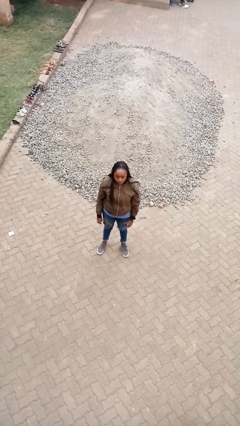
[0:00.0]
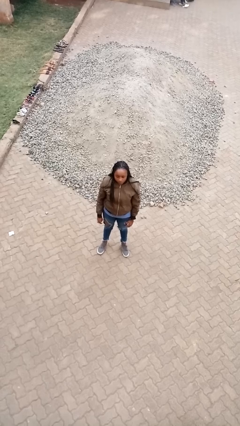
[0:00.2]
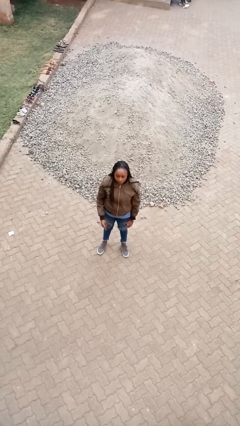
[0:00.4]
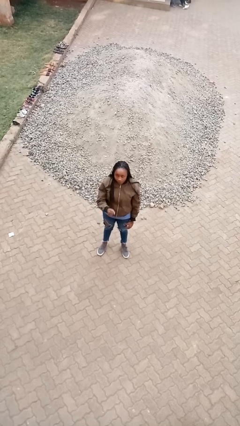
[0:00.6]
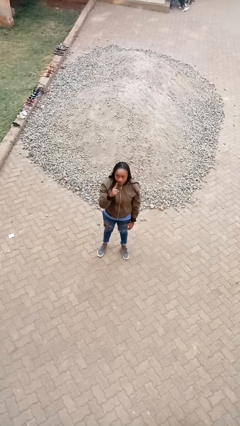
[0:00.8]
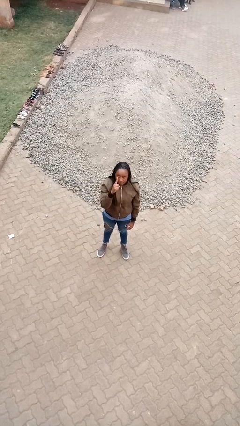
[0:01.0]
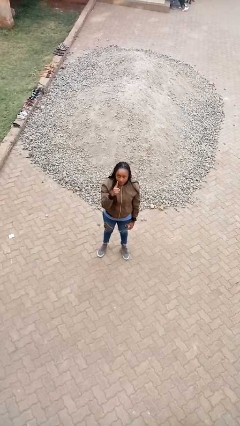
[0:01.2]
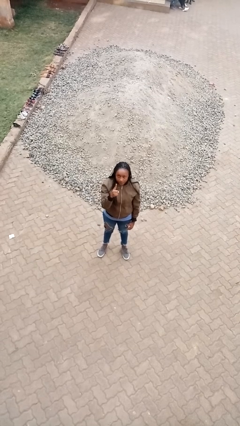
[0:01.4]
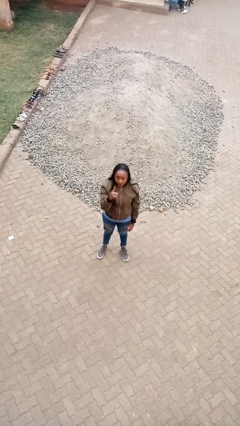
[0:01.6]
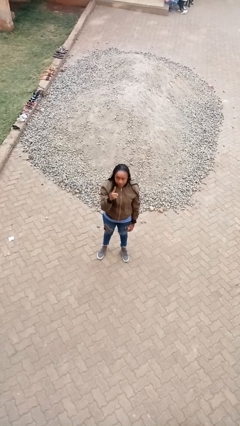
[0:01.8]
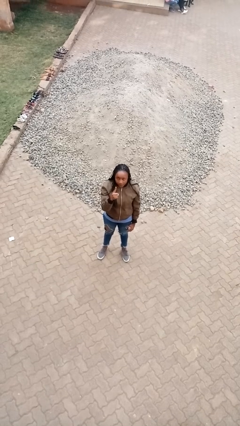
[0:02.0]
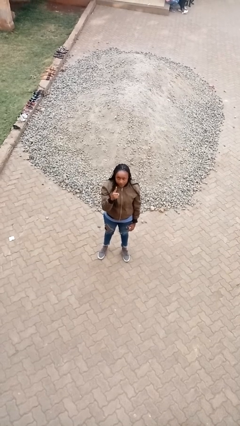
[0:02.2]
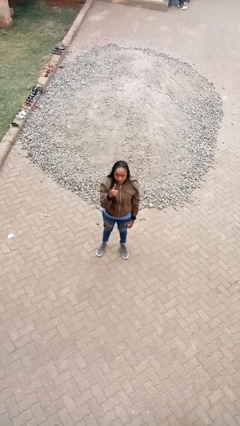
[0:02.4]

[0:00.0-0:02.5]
person gestures number one

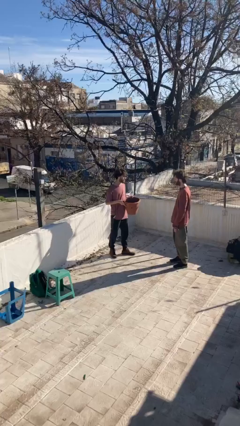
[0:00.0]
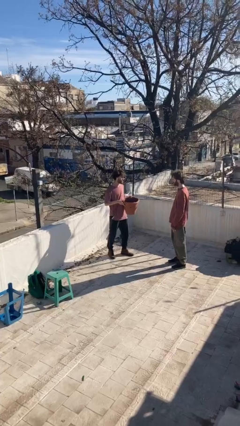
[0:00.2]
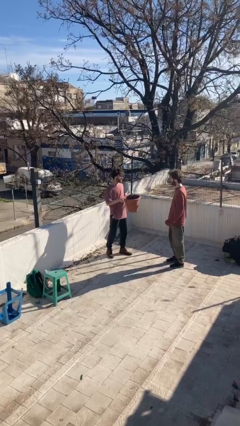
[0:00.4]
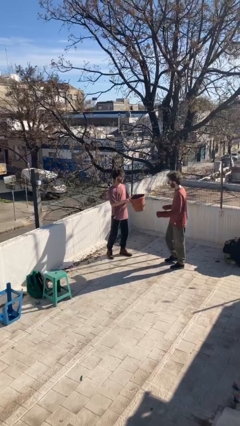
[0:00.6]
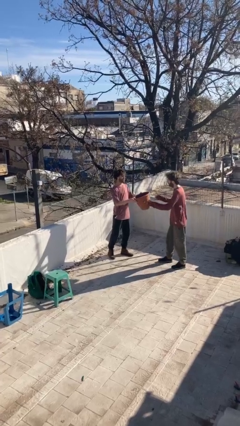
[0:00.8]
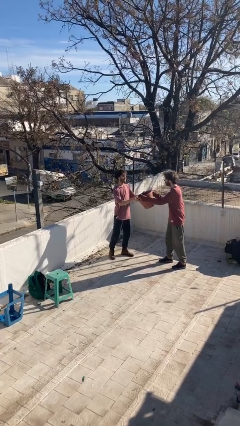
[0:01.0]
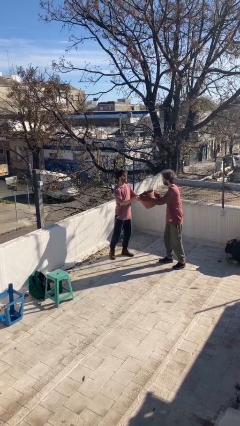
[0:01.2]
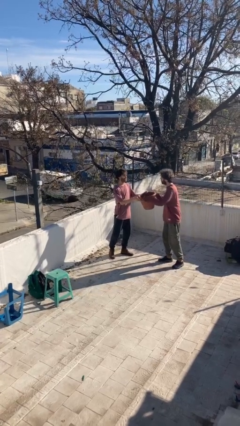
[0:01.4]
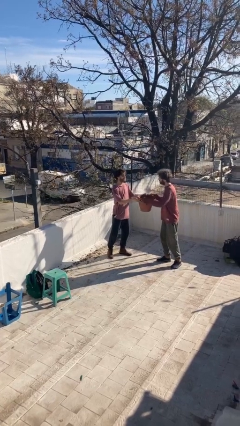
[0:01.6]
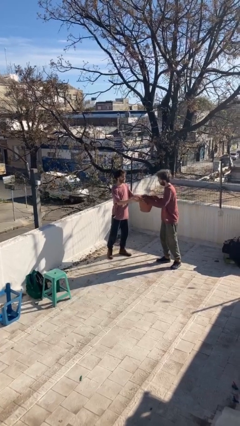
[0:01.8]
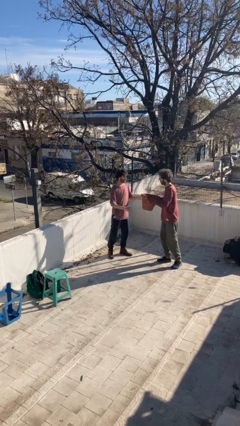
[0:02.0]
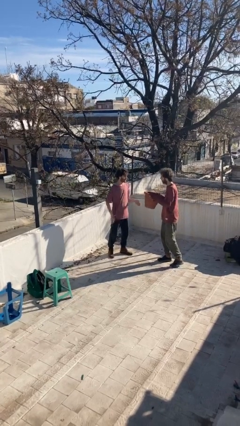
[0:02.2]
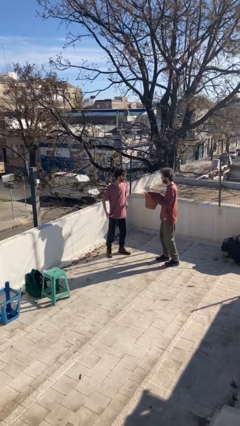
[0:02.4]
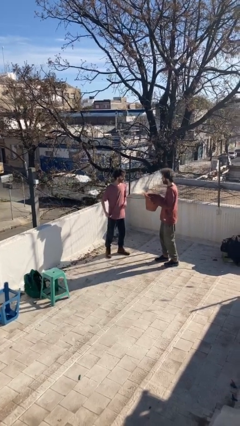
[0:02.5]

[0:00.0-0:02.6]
person transfers object to person

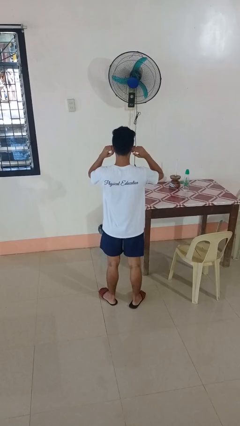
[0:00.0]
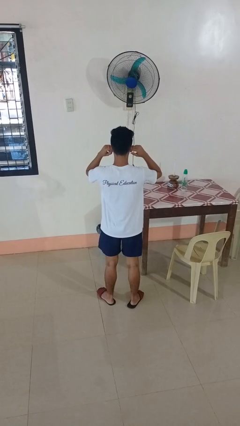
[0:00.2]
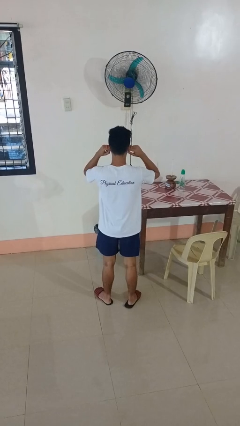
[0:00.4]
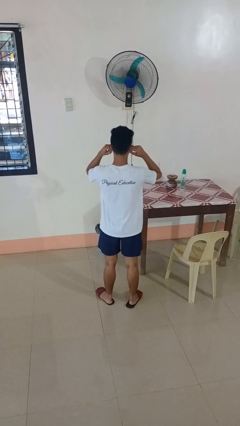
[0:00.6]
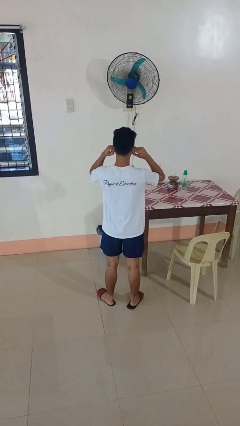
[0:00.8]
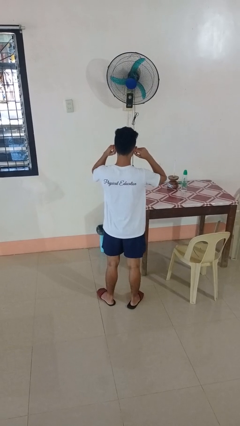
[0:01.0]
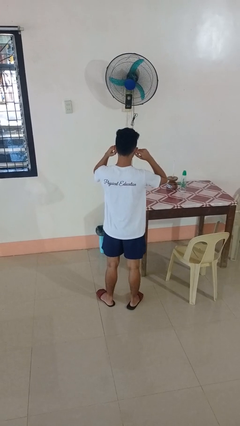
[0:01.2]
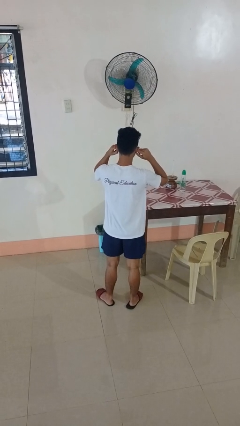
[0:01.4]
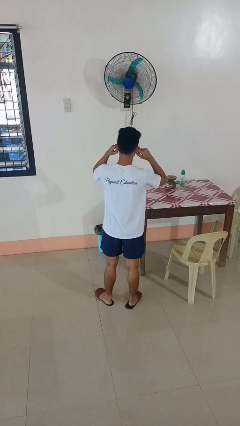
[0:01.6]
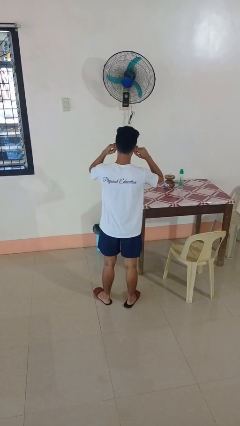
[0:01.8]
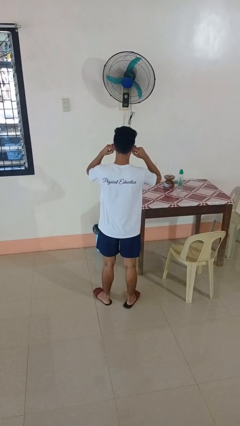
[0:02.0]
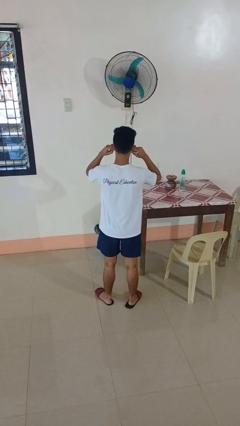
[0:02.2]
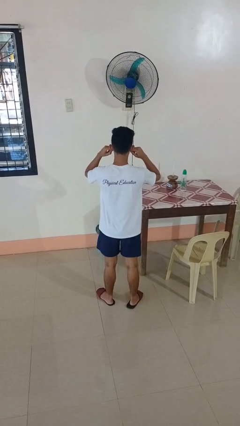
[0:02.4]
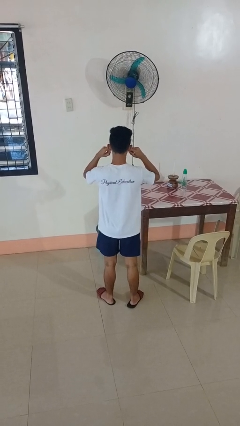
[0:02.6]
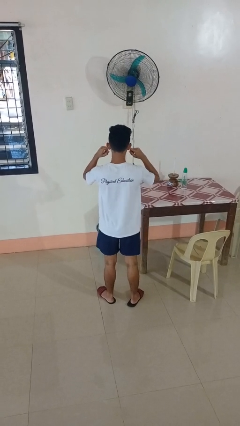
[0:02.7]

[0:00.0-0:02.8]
person puts fingers in ear

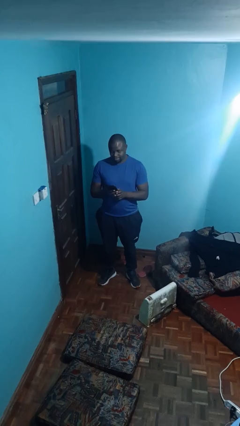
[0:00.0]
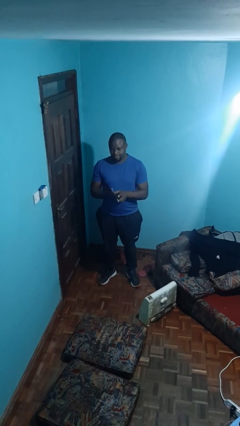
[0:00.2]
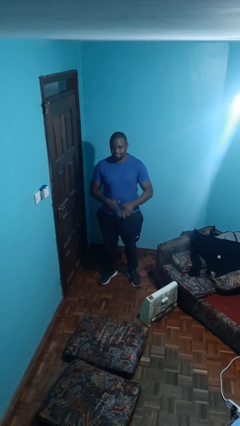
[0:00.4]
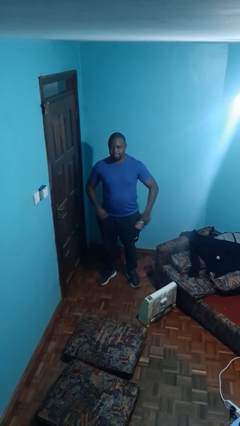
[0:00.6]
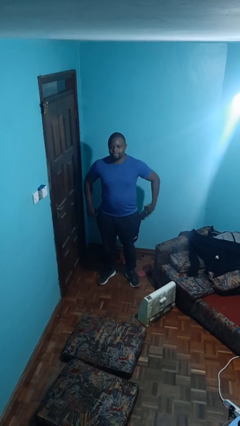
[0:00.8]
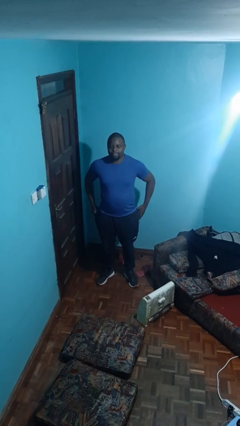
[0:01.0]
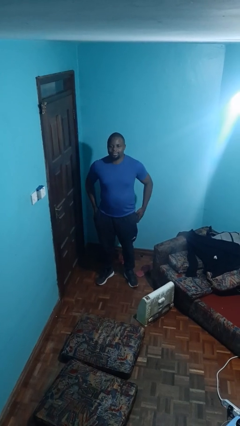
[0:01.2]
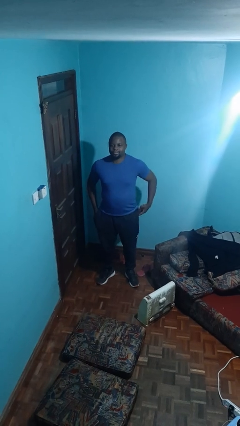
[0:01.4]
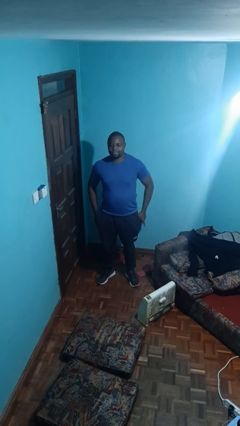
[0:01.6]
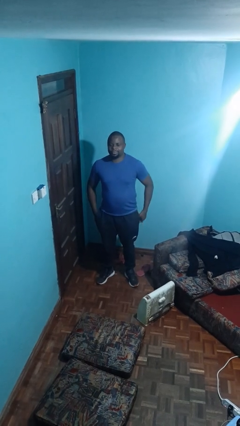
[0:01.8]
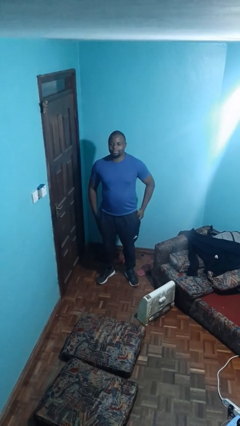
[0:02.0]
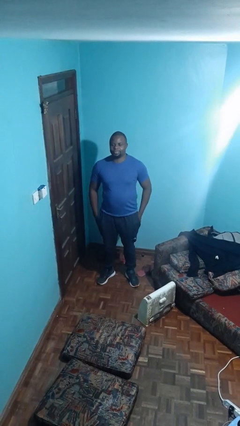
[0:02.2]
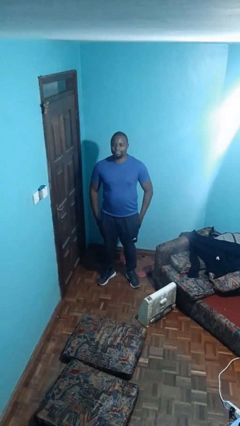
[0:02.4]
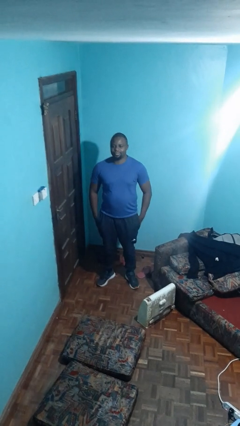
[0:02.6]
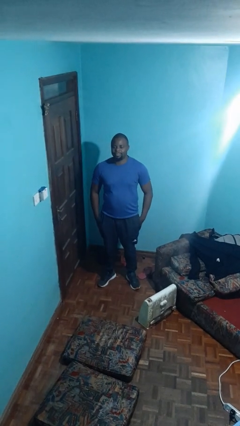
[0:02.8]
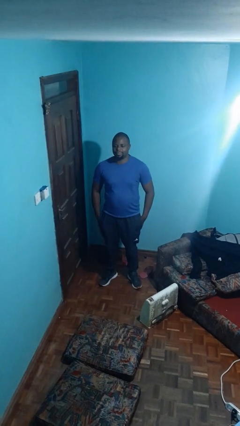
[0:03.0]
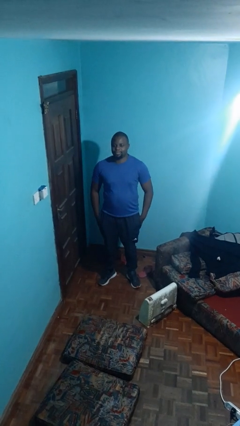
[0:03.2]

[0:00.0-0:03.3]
person puts phone into pocket

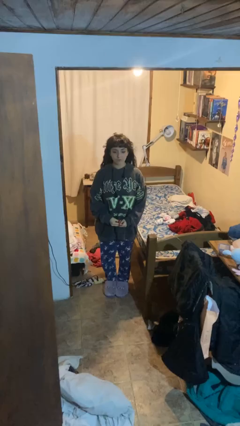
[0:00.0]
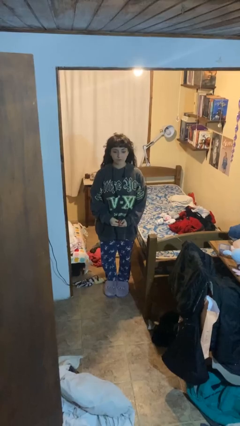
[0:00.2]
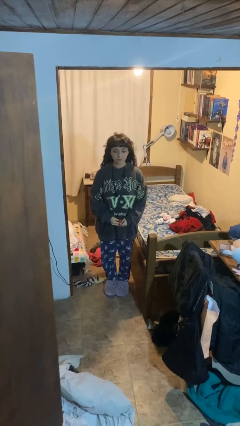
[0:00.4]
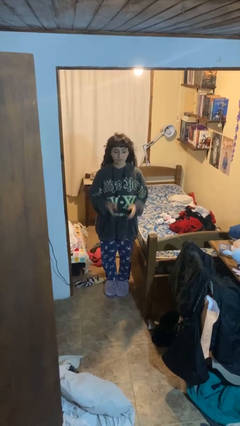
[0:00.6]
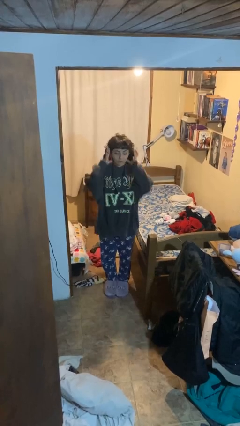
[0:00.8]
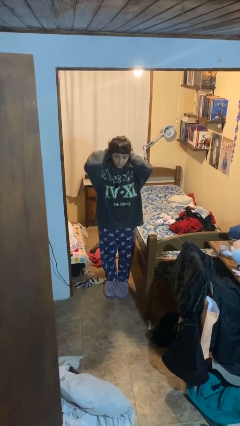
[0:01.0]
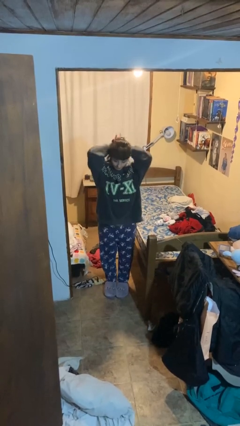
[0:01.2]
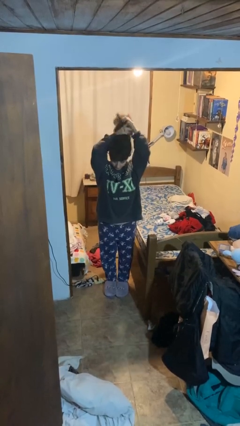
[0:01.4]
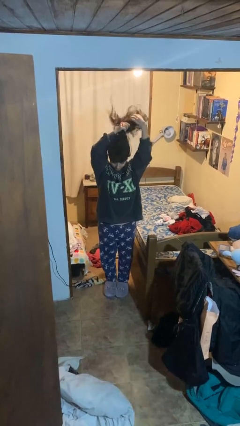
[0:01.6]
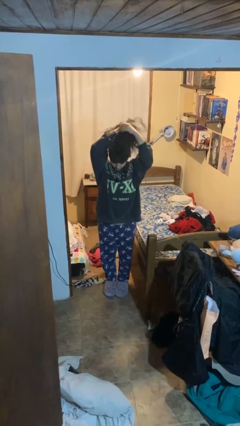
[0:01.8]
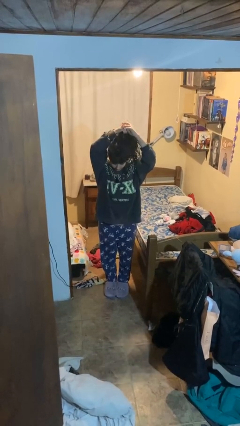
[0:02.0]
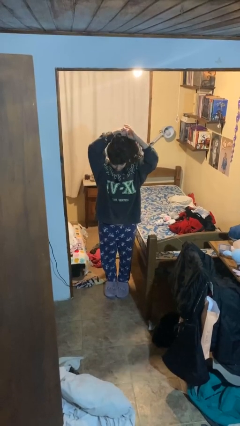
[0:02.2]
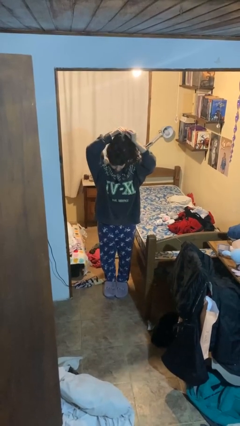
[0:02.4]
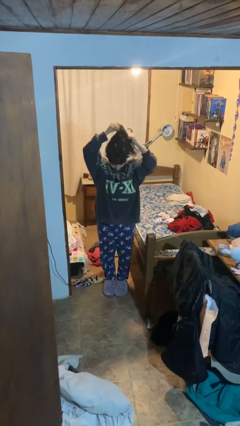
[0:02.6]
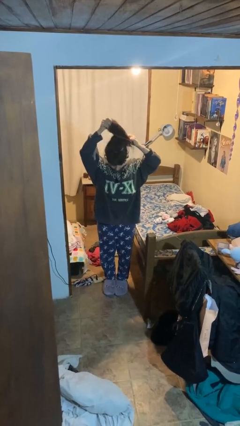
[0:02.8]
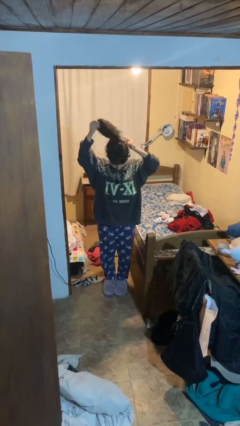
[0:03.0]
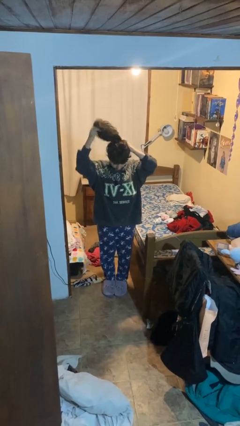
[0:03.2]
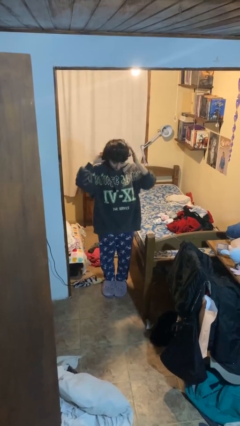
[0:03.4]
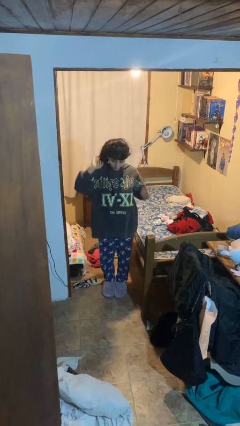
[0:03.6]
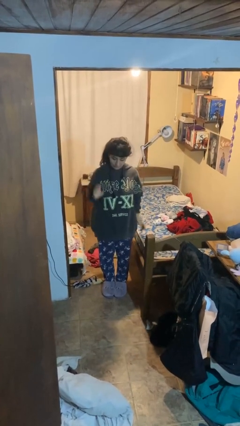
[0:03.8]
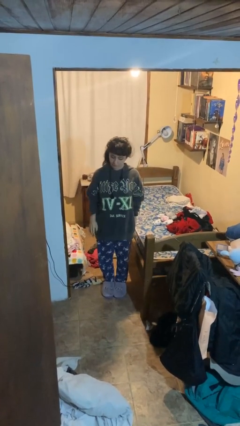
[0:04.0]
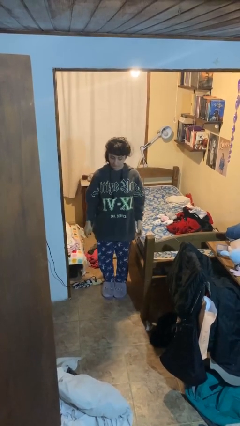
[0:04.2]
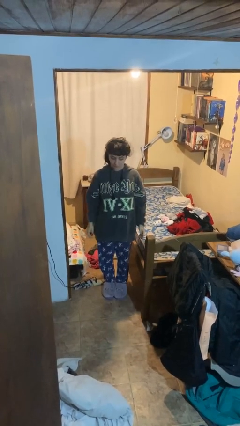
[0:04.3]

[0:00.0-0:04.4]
person puts hair in ponytail

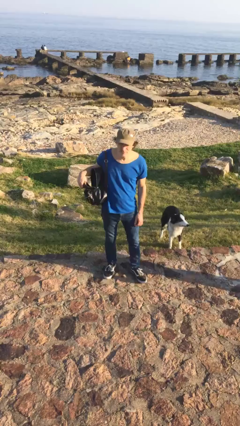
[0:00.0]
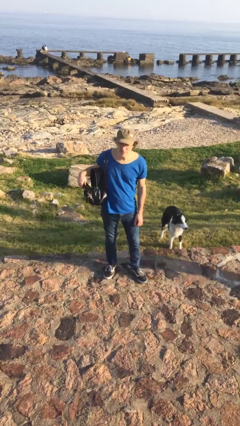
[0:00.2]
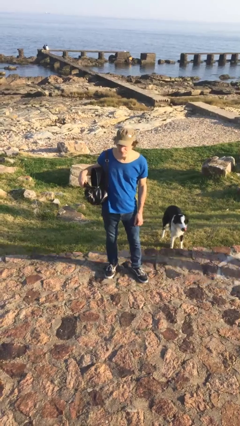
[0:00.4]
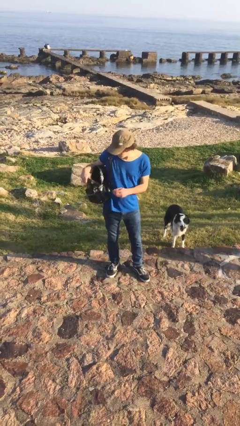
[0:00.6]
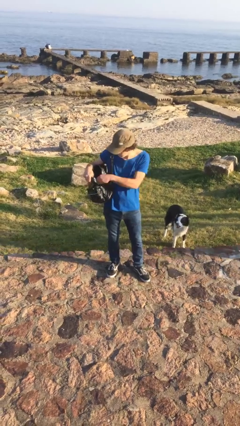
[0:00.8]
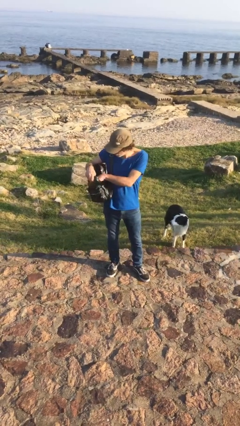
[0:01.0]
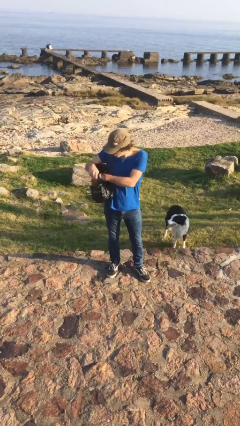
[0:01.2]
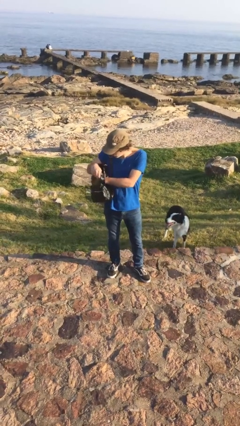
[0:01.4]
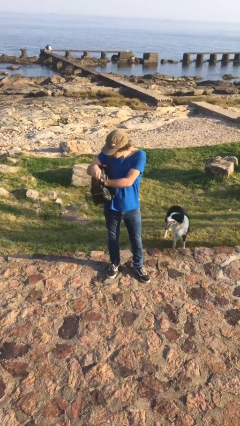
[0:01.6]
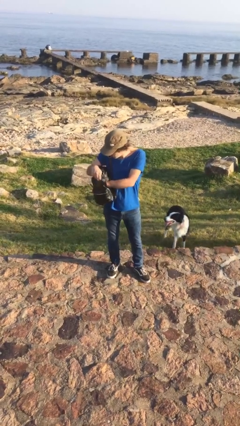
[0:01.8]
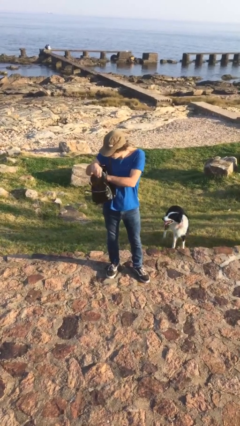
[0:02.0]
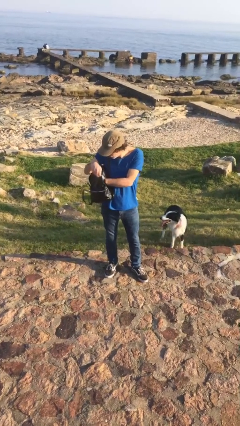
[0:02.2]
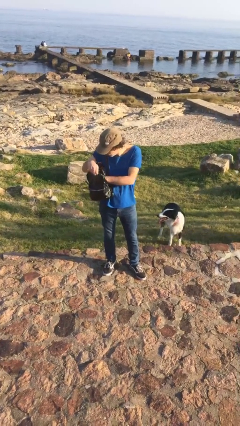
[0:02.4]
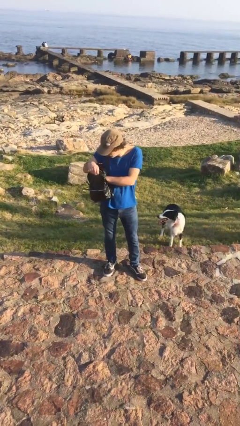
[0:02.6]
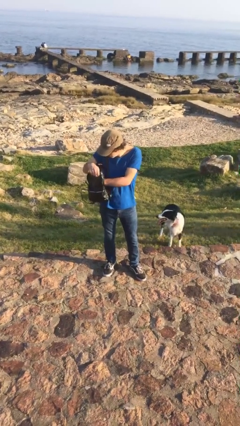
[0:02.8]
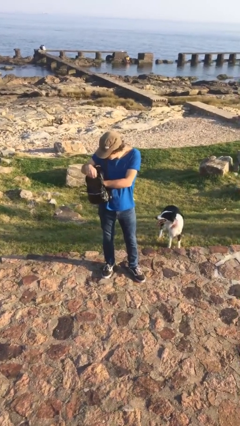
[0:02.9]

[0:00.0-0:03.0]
person searches in purse
